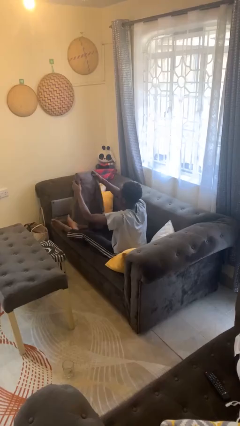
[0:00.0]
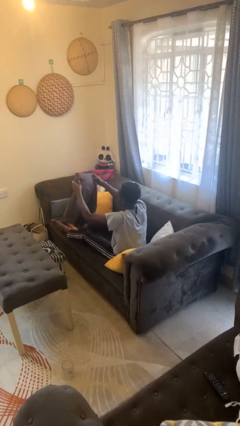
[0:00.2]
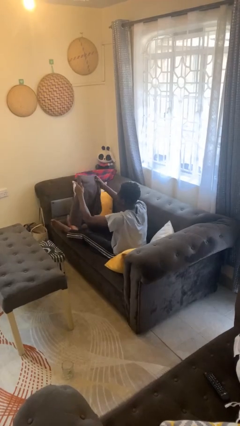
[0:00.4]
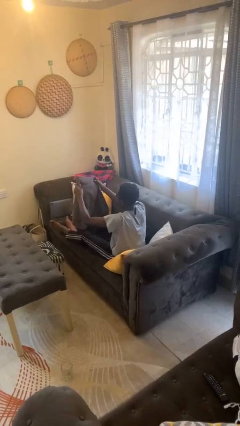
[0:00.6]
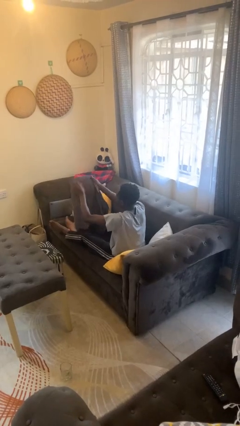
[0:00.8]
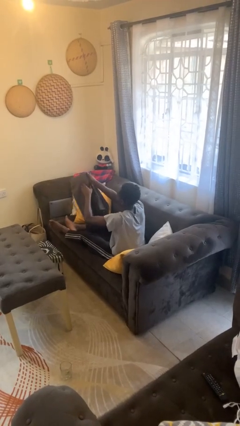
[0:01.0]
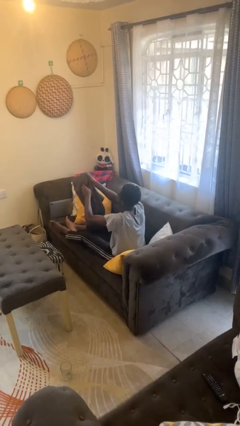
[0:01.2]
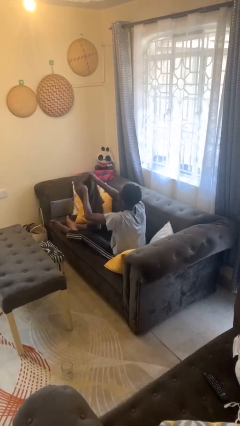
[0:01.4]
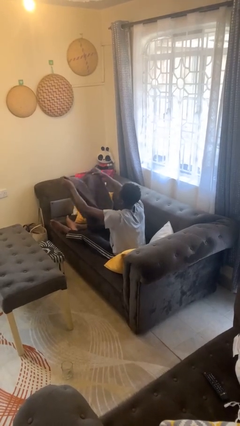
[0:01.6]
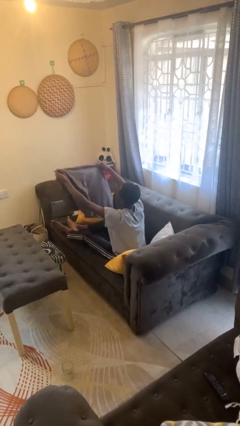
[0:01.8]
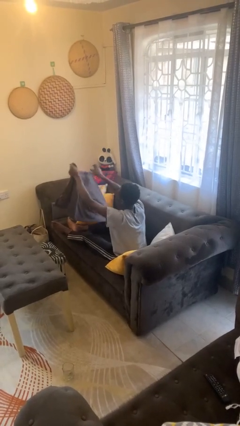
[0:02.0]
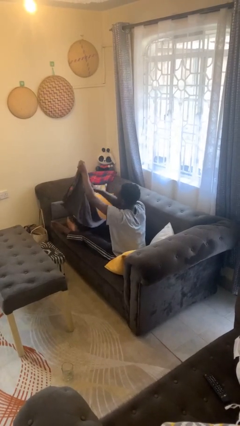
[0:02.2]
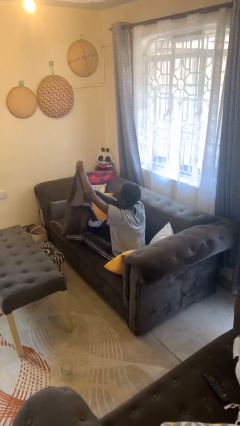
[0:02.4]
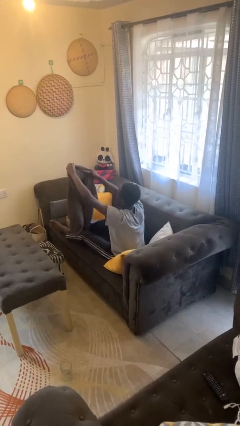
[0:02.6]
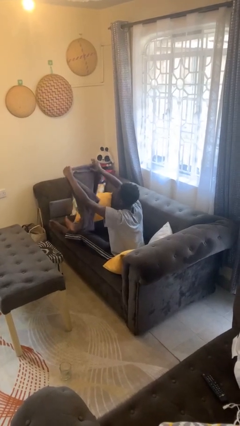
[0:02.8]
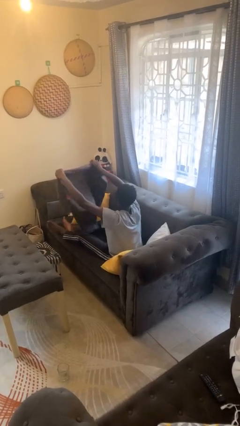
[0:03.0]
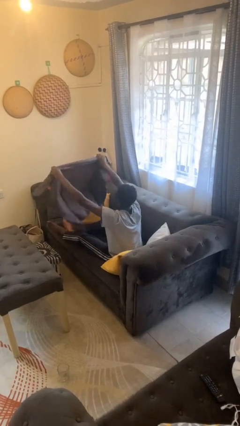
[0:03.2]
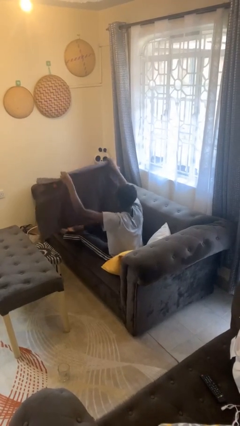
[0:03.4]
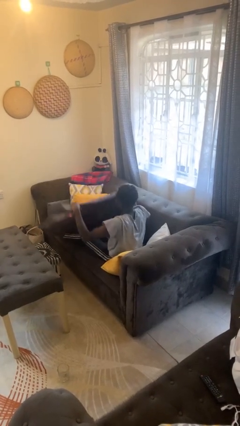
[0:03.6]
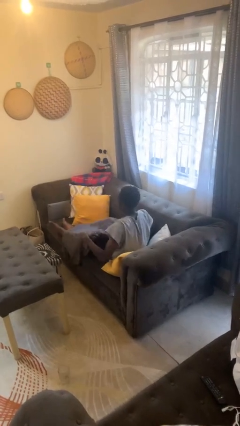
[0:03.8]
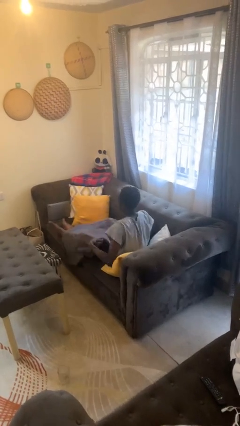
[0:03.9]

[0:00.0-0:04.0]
person unfolds blanket

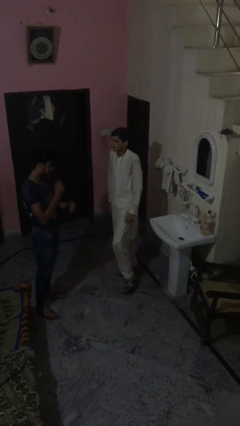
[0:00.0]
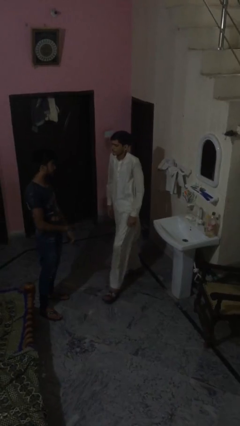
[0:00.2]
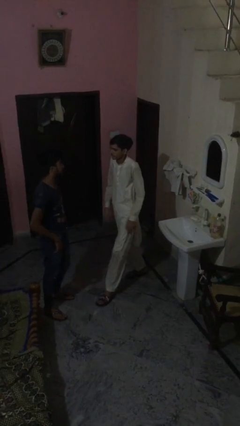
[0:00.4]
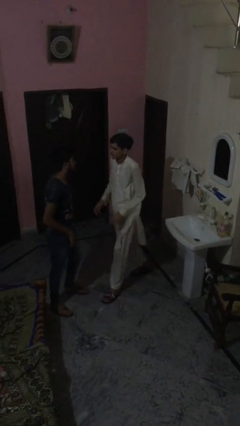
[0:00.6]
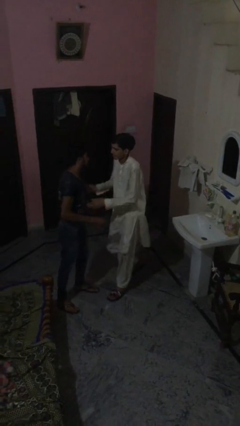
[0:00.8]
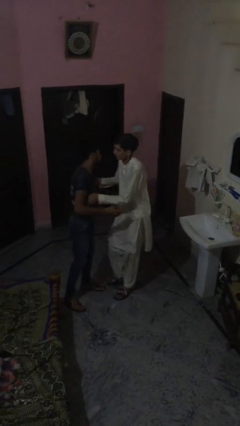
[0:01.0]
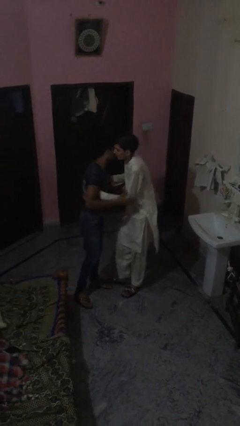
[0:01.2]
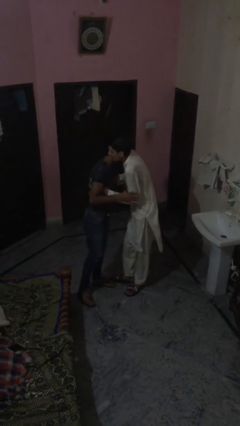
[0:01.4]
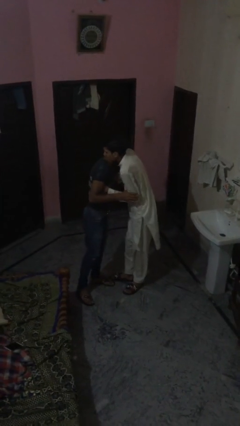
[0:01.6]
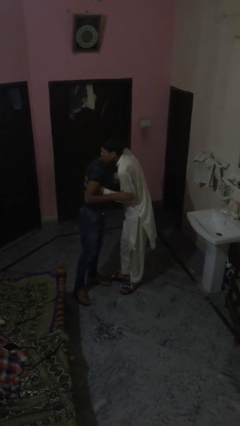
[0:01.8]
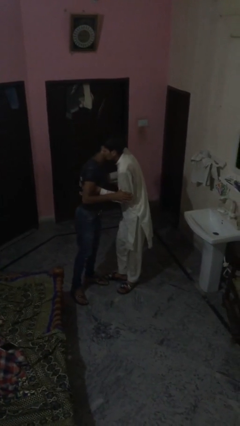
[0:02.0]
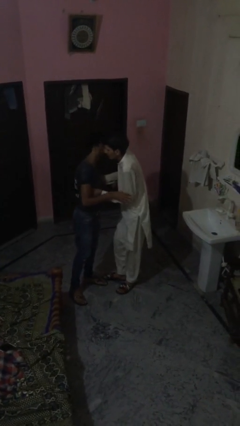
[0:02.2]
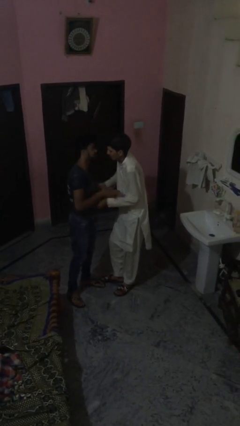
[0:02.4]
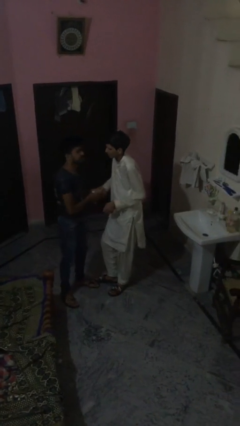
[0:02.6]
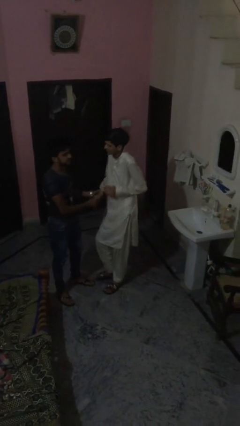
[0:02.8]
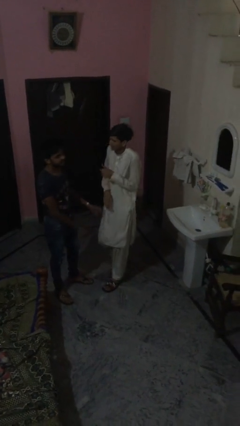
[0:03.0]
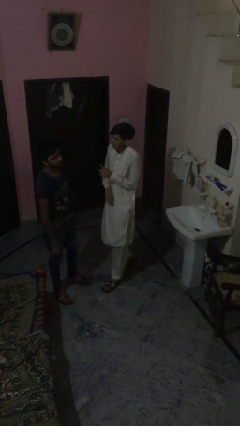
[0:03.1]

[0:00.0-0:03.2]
person embraces person

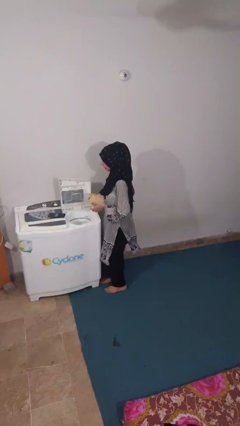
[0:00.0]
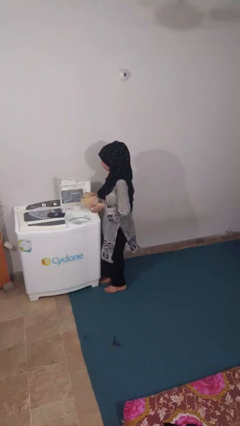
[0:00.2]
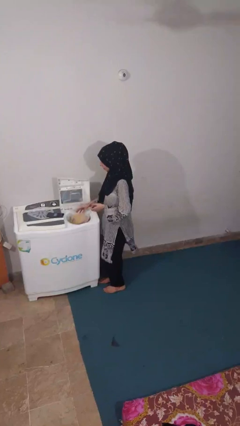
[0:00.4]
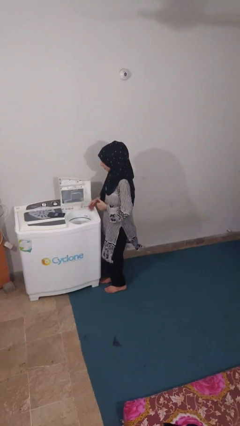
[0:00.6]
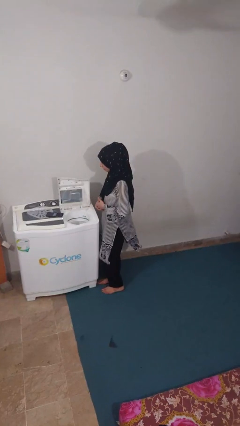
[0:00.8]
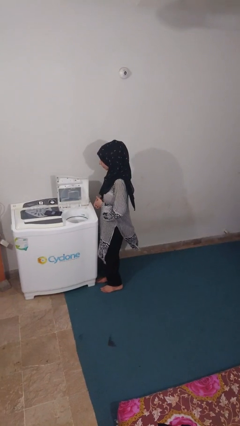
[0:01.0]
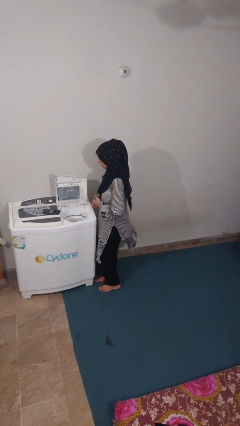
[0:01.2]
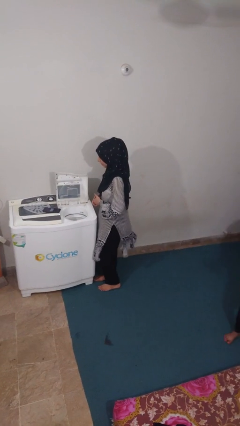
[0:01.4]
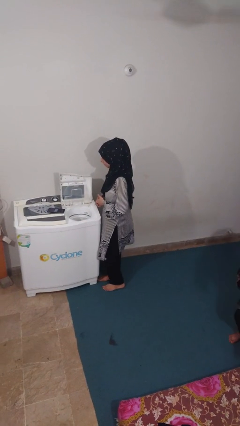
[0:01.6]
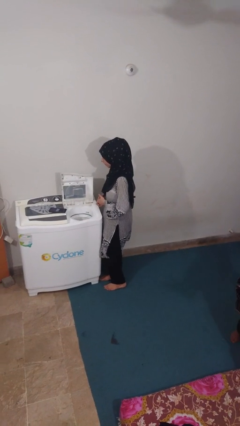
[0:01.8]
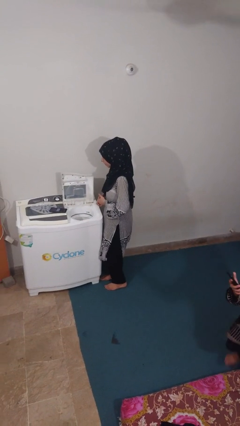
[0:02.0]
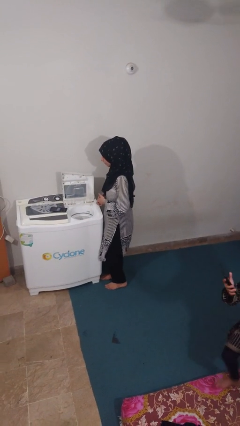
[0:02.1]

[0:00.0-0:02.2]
person loads dryer

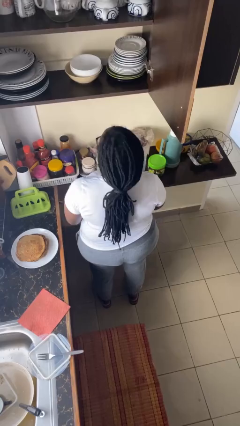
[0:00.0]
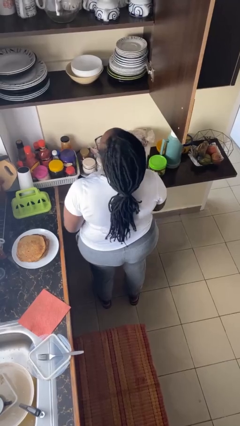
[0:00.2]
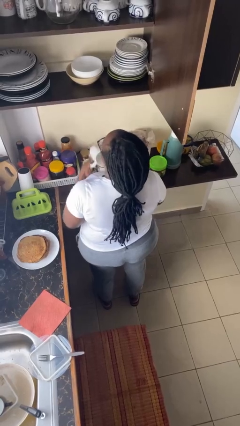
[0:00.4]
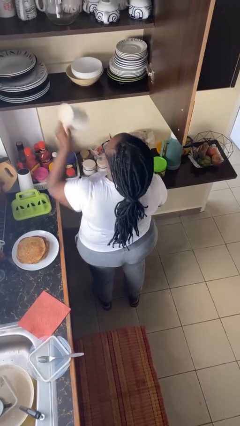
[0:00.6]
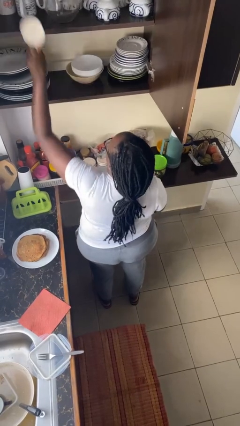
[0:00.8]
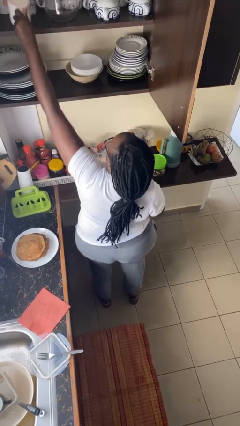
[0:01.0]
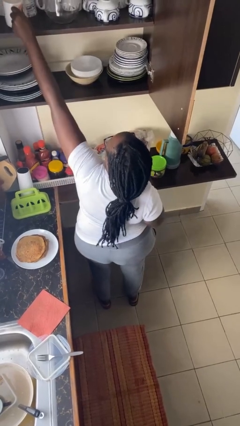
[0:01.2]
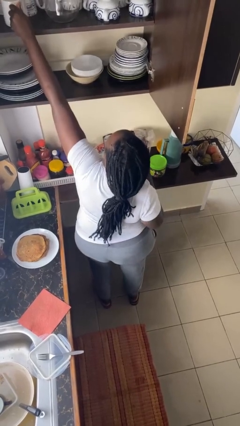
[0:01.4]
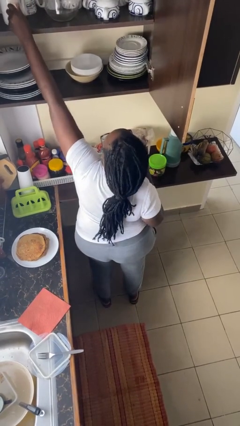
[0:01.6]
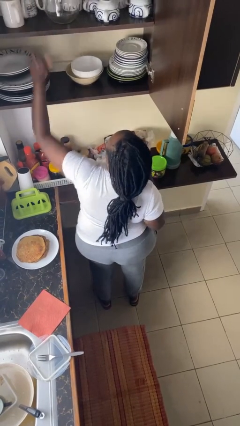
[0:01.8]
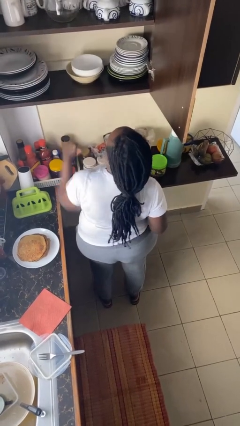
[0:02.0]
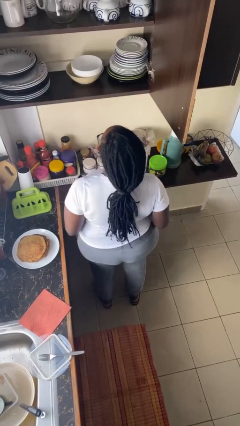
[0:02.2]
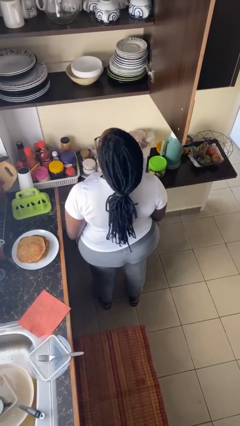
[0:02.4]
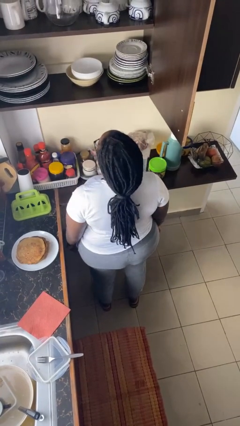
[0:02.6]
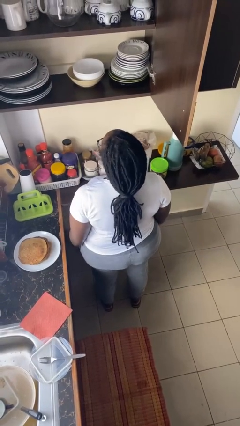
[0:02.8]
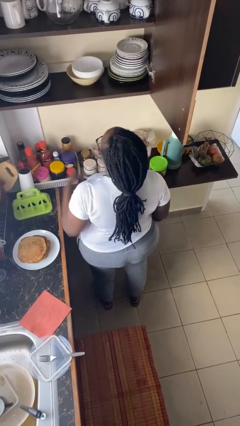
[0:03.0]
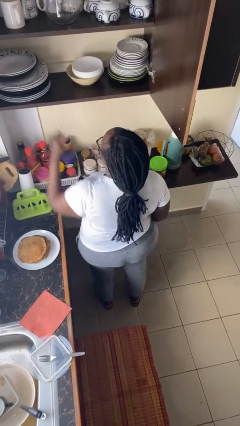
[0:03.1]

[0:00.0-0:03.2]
person puts object in cabinet

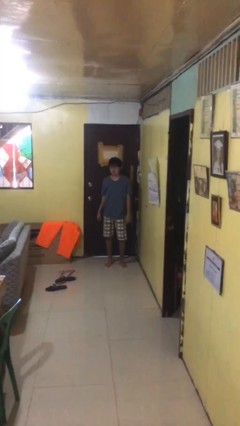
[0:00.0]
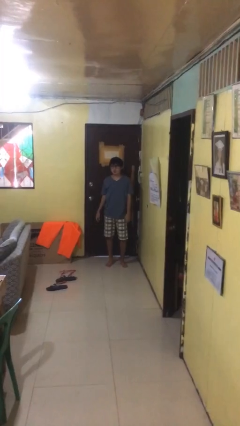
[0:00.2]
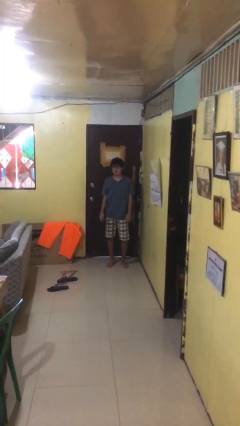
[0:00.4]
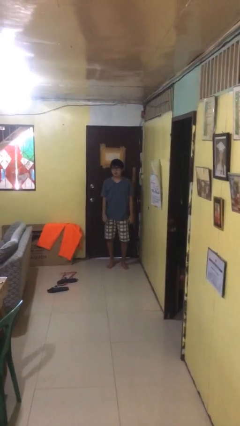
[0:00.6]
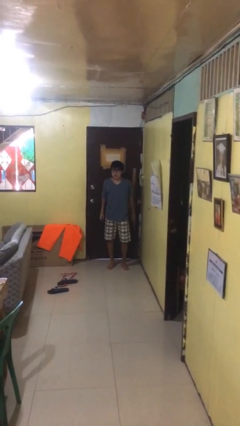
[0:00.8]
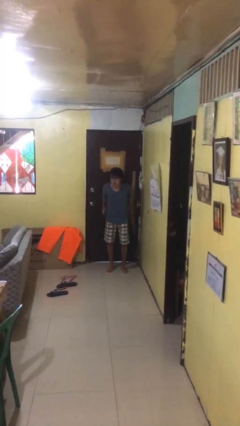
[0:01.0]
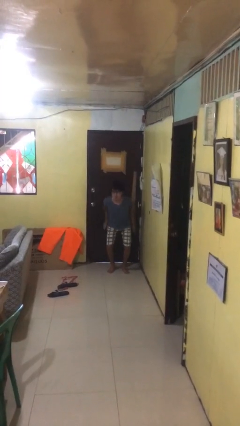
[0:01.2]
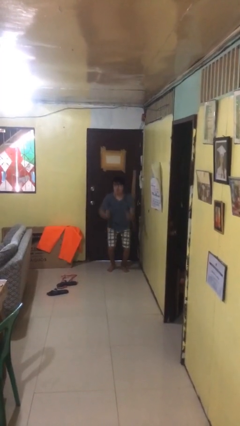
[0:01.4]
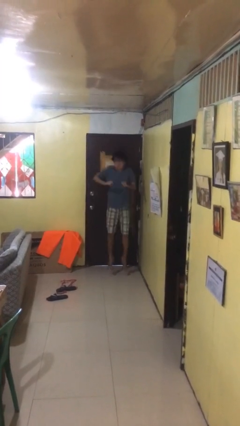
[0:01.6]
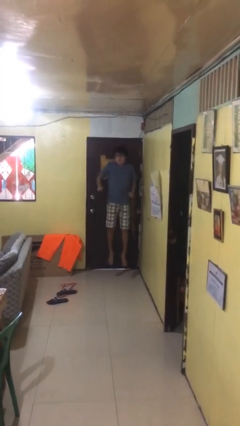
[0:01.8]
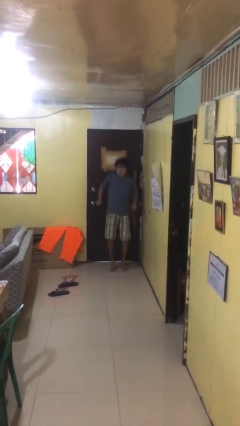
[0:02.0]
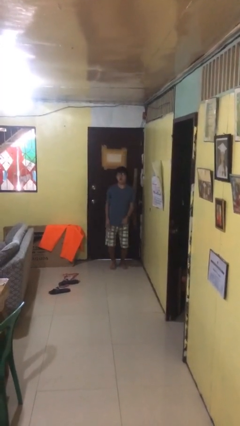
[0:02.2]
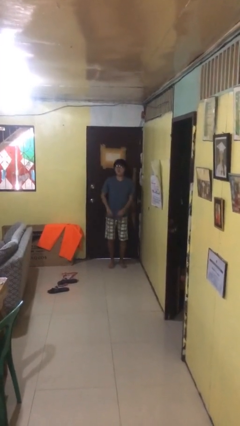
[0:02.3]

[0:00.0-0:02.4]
person jumps

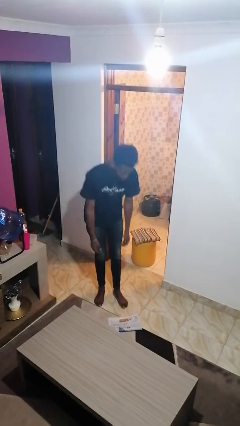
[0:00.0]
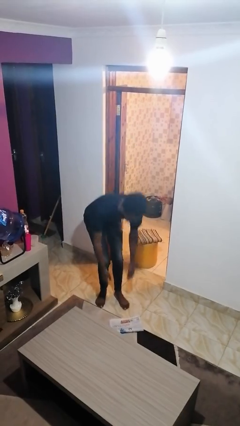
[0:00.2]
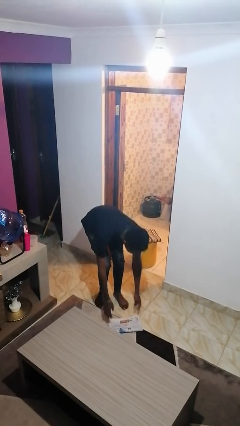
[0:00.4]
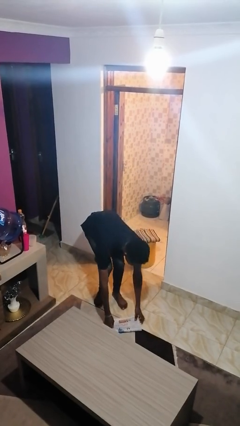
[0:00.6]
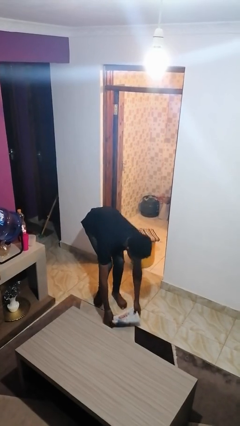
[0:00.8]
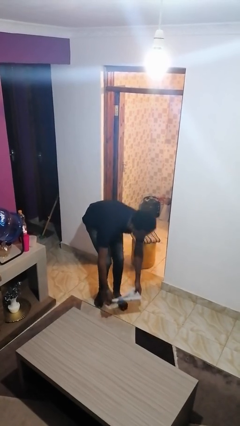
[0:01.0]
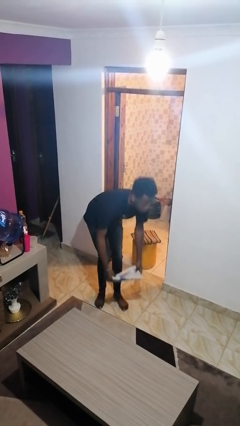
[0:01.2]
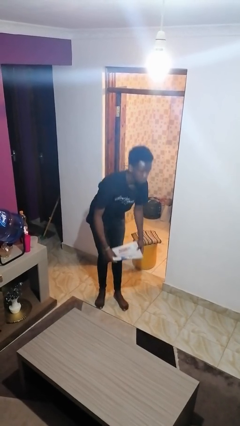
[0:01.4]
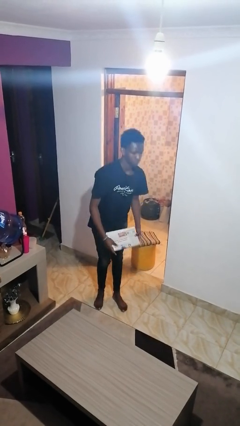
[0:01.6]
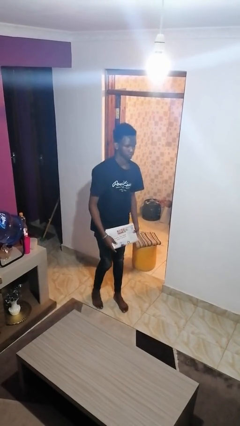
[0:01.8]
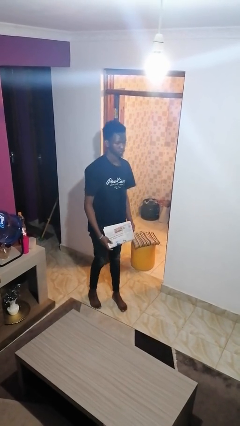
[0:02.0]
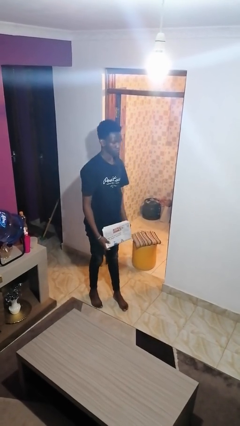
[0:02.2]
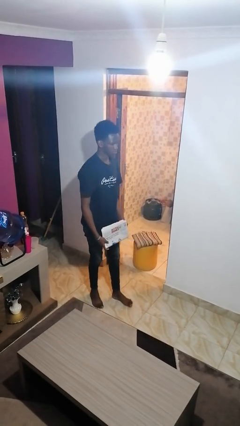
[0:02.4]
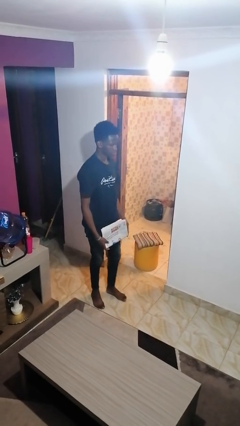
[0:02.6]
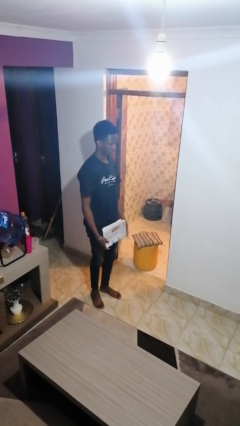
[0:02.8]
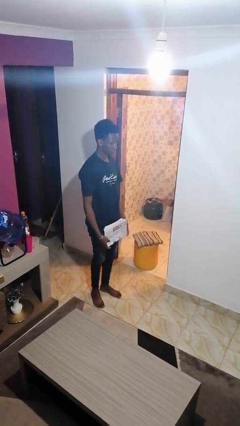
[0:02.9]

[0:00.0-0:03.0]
person picks up object from floor
